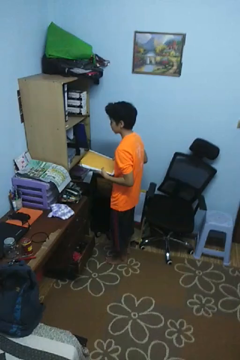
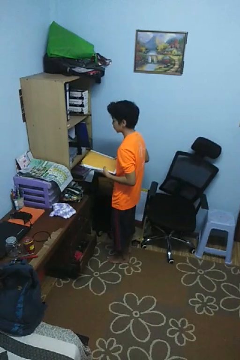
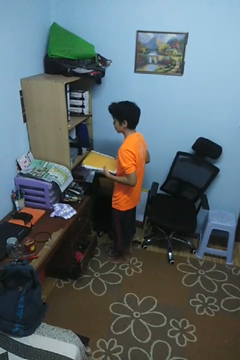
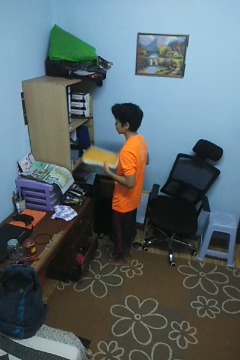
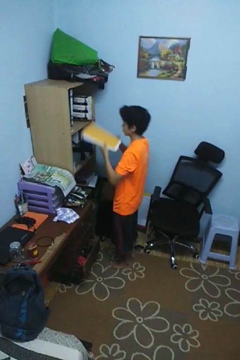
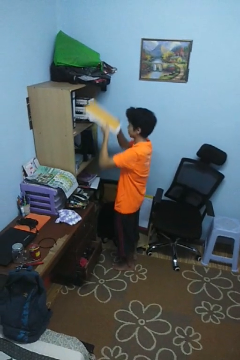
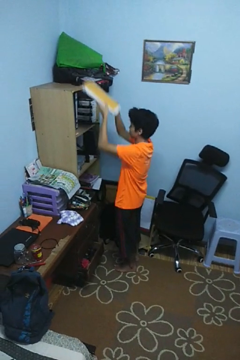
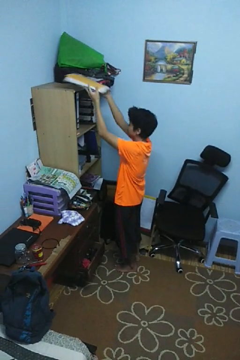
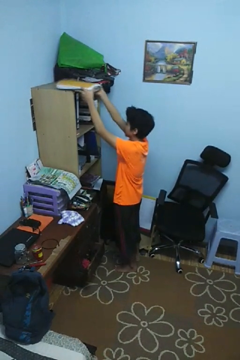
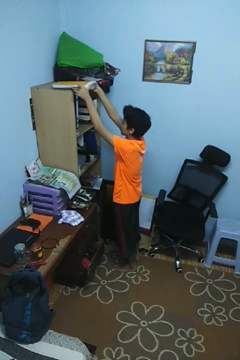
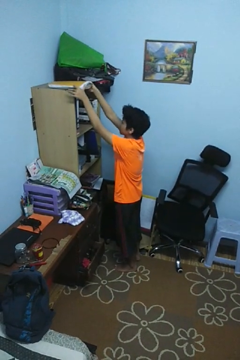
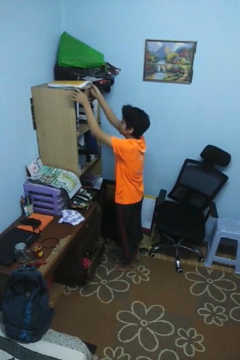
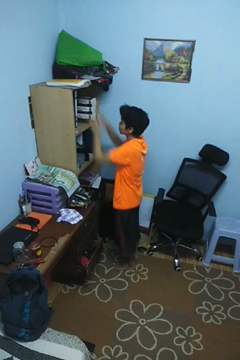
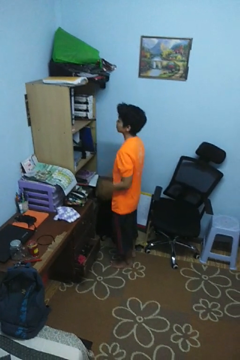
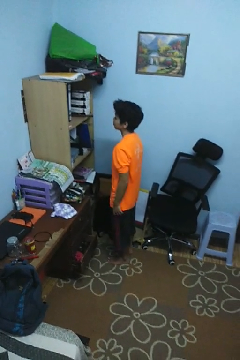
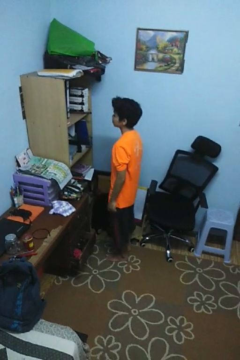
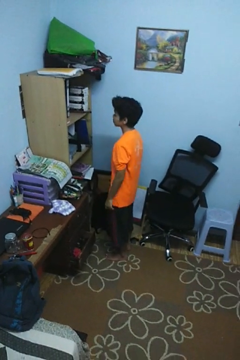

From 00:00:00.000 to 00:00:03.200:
person puts down object on shelf

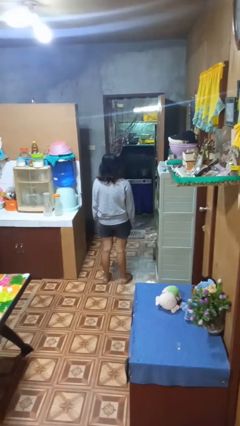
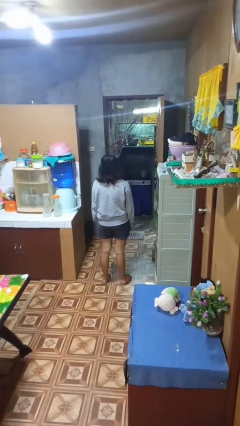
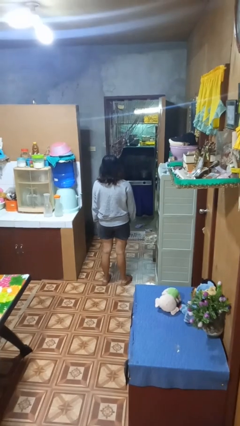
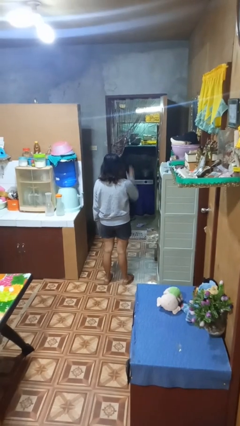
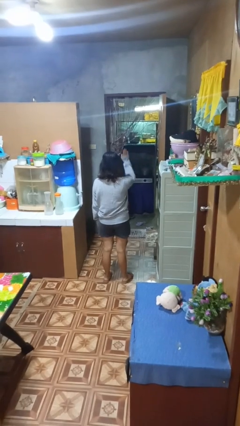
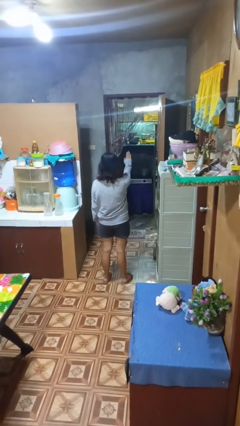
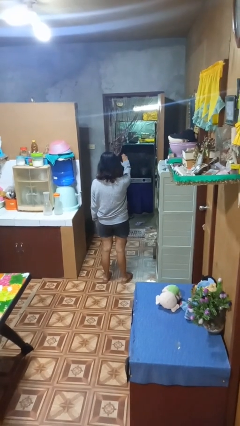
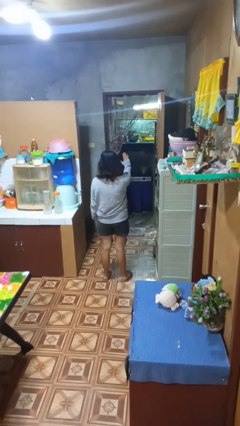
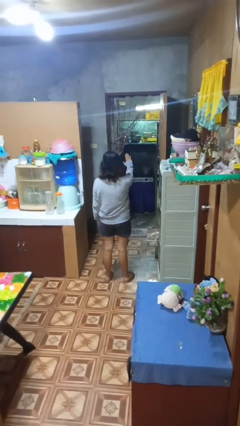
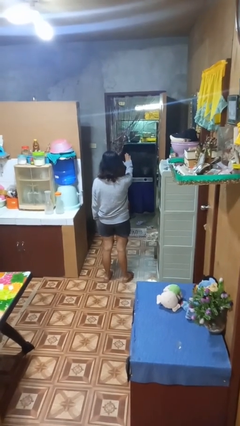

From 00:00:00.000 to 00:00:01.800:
person gestures stop

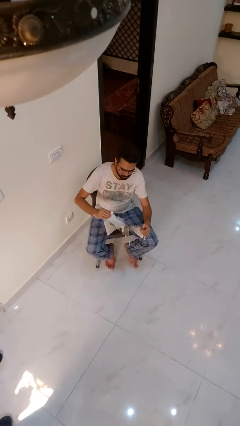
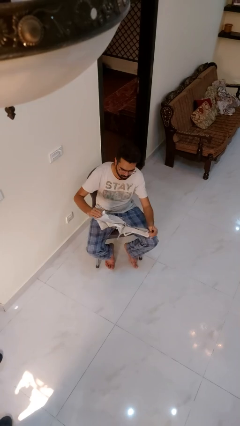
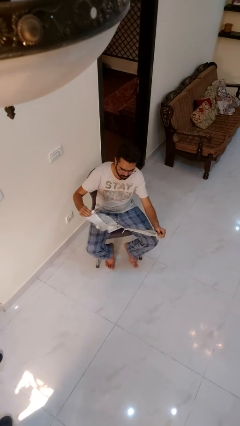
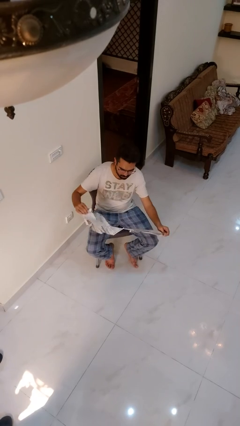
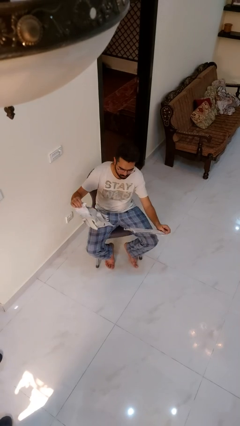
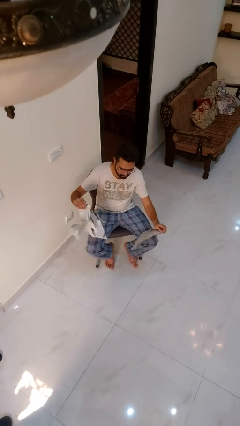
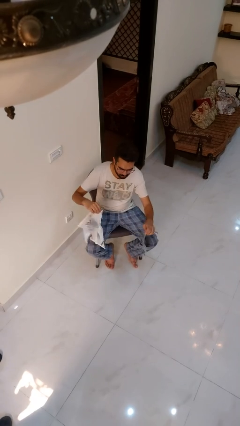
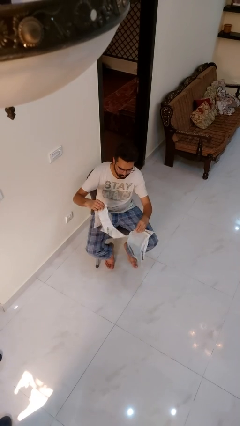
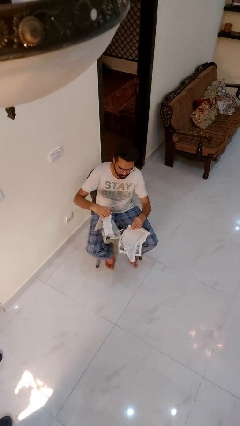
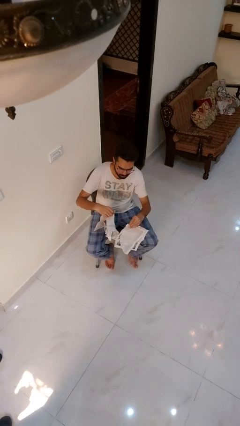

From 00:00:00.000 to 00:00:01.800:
person tears paper

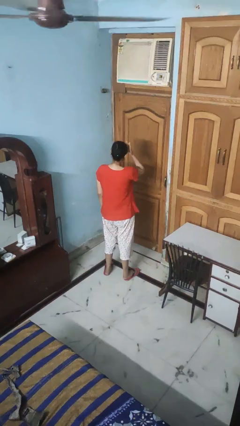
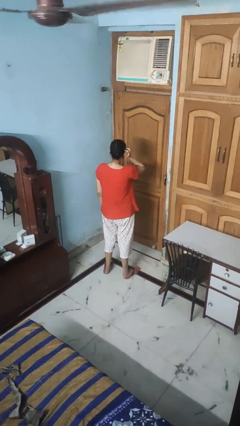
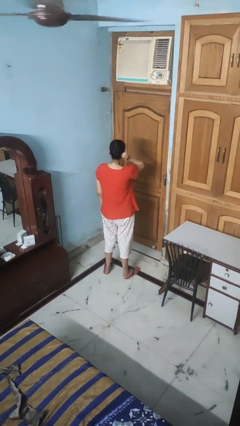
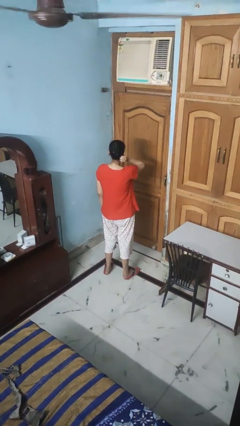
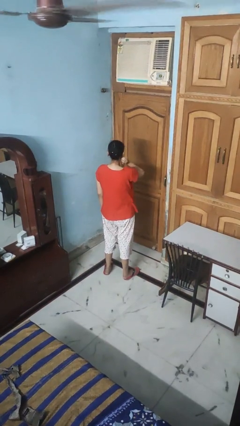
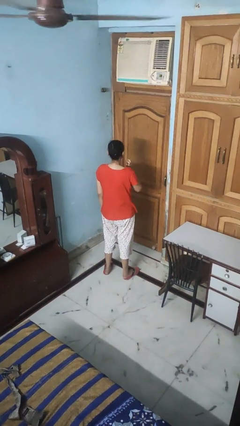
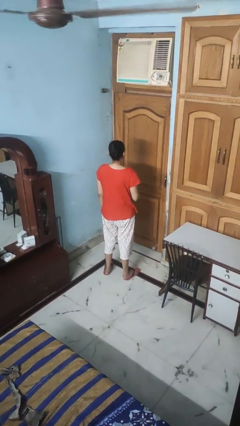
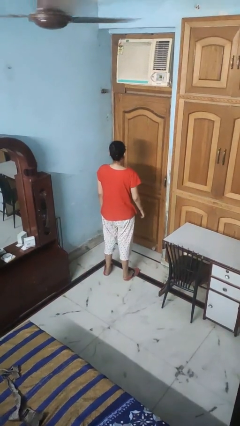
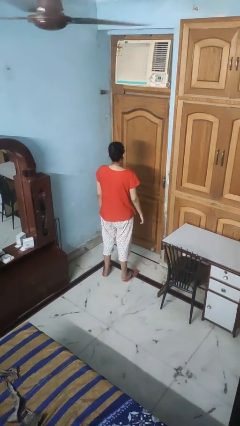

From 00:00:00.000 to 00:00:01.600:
person strokes hair

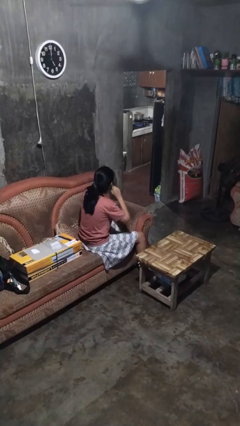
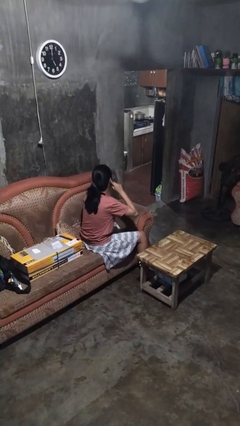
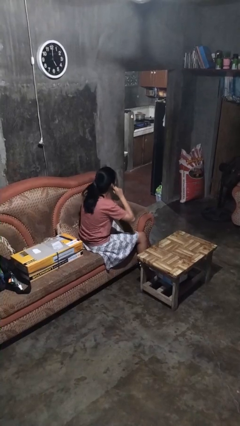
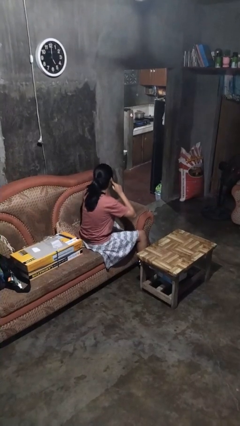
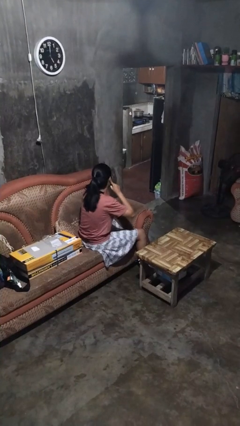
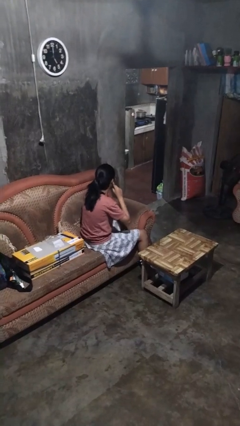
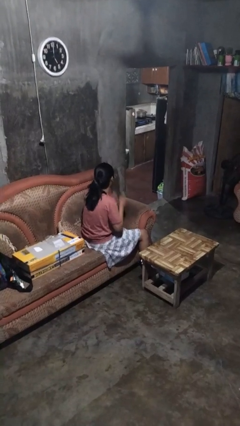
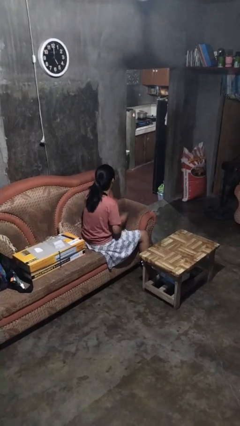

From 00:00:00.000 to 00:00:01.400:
person puts fingers in ear

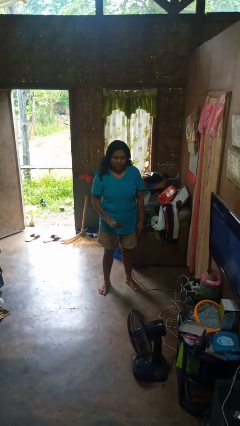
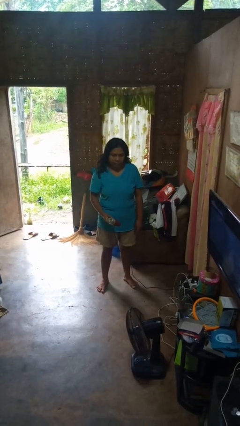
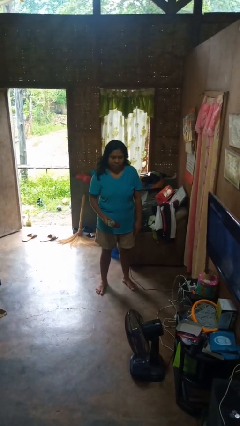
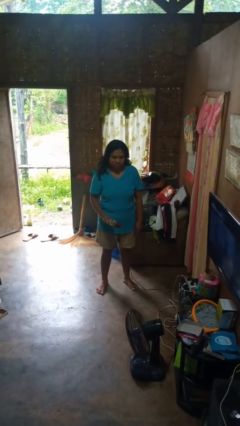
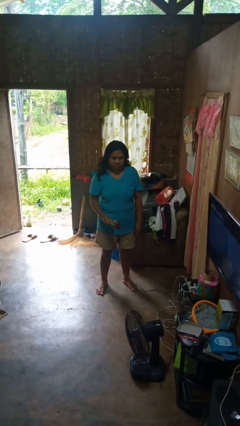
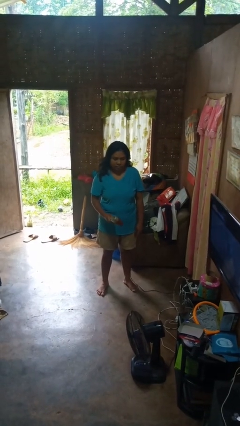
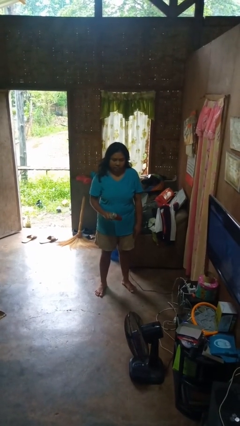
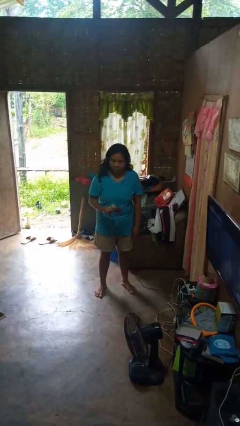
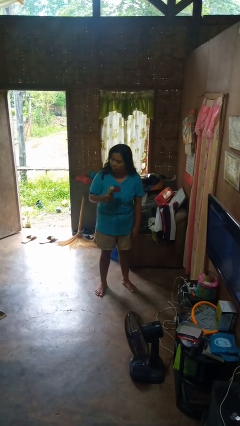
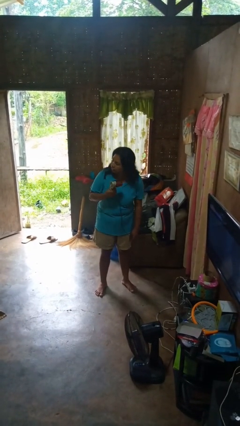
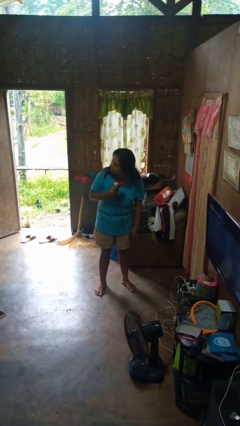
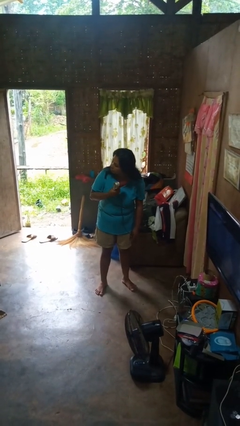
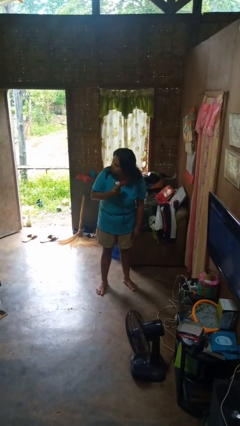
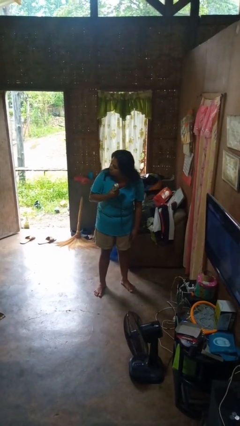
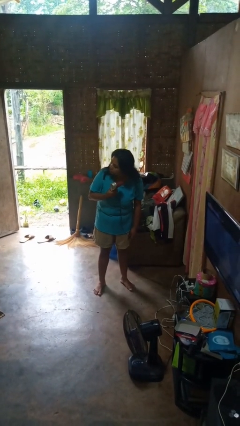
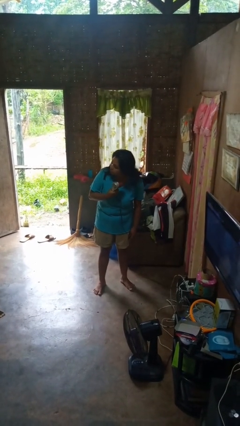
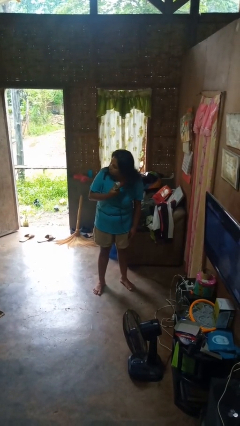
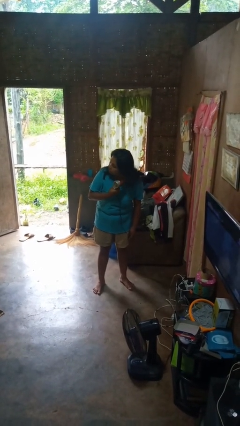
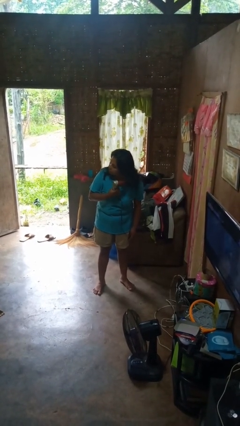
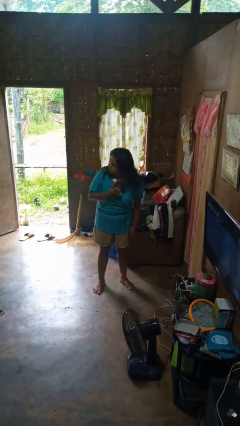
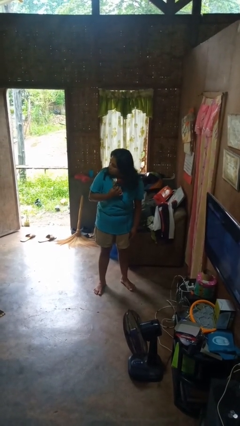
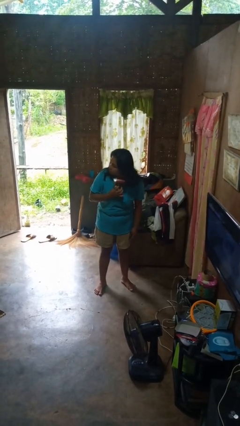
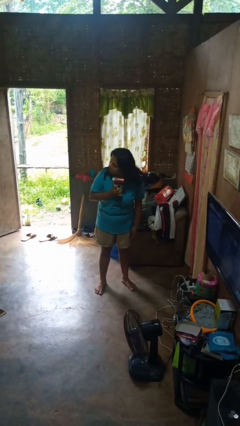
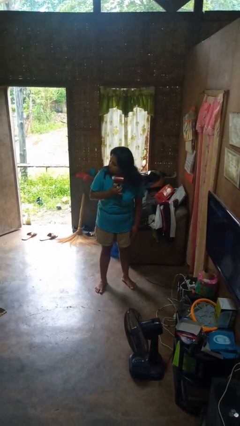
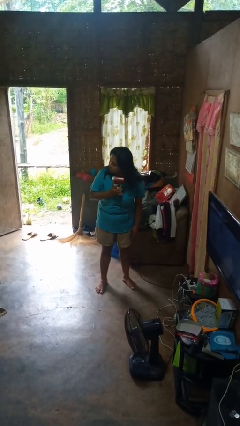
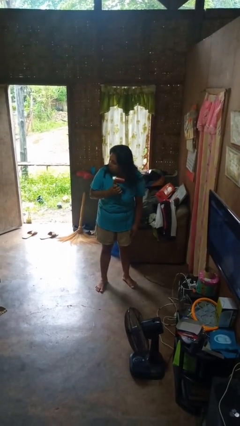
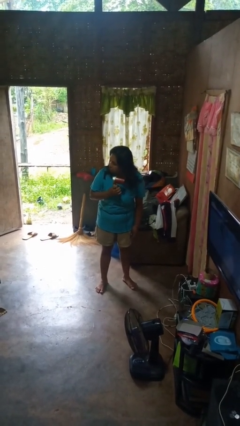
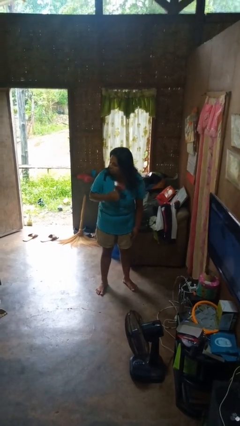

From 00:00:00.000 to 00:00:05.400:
person dries hair with hairdryer

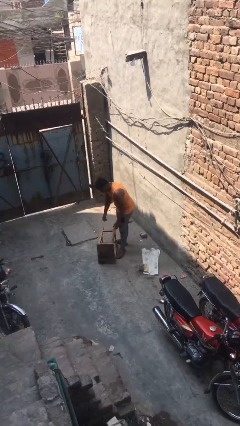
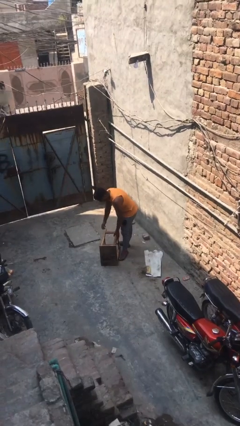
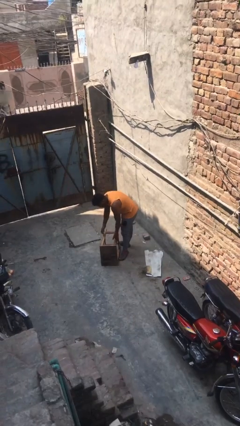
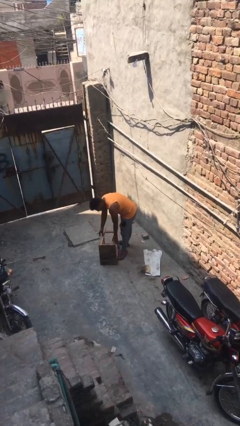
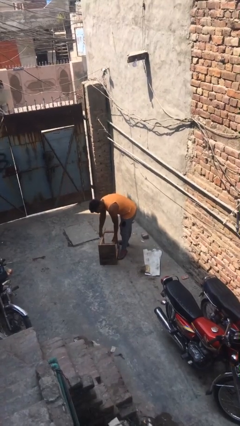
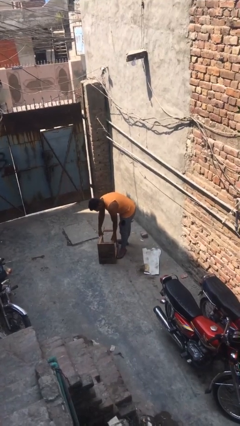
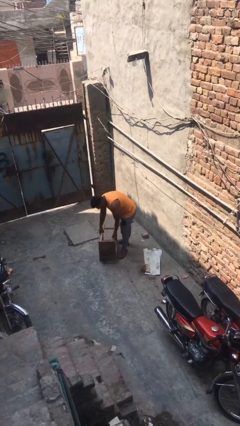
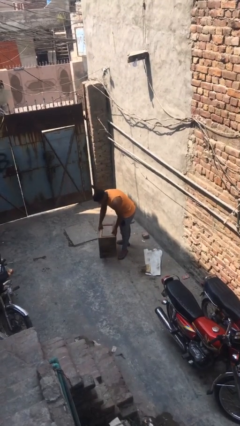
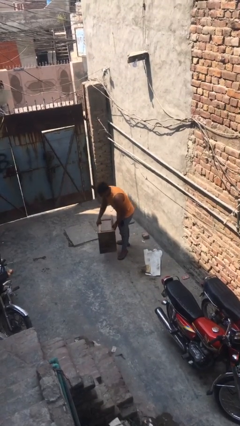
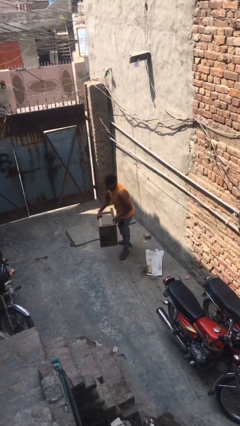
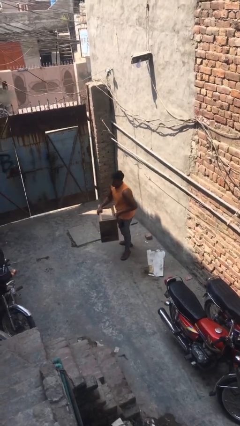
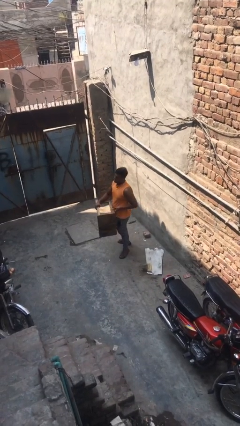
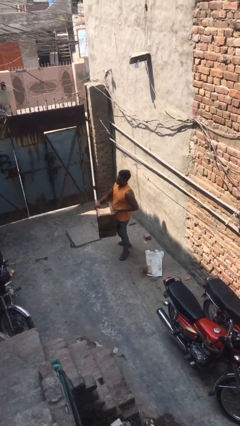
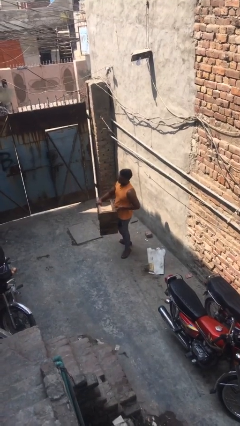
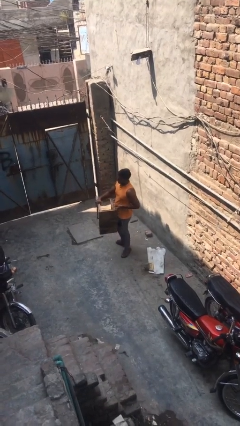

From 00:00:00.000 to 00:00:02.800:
person picks up object from floor
